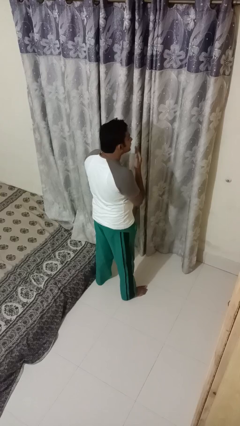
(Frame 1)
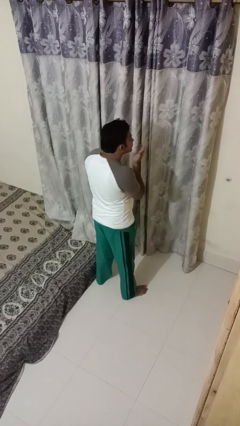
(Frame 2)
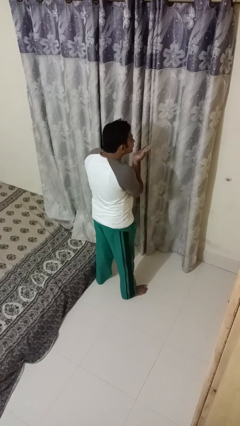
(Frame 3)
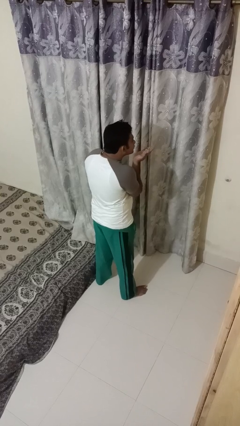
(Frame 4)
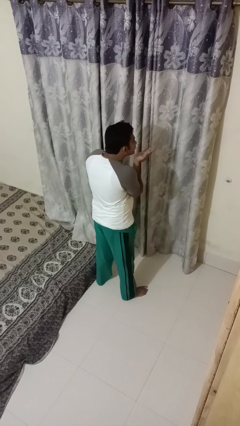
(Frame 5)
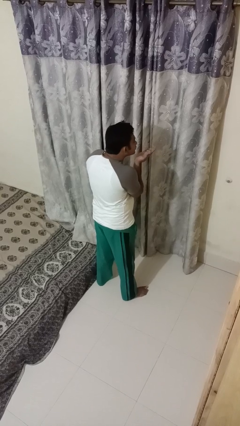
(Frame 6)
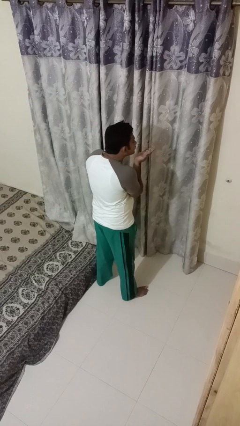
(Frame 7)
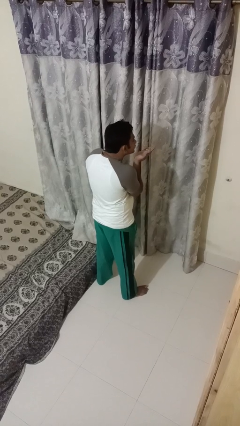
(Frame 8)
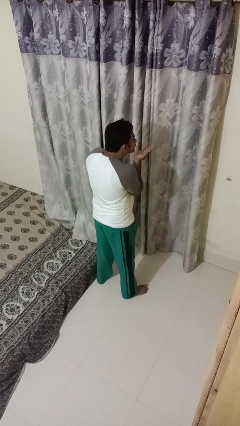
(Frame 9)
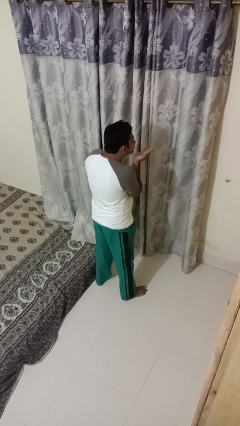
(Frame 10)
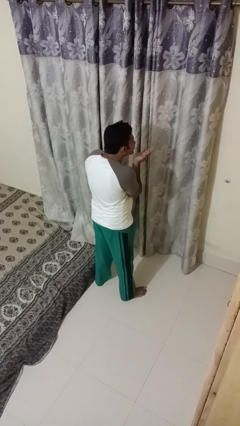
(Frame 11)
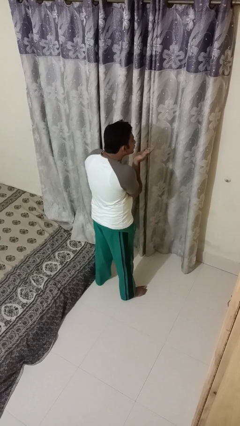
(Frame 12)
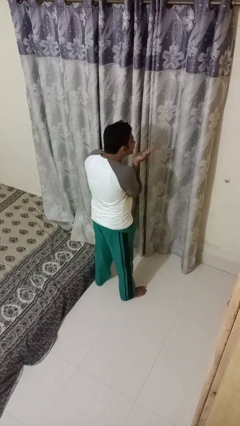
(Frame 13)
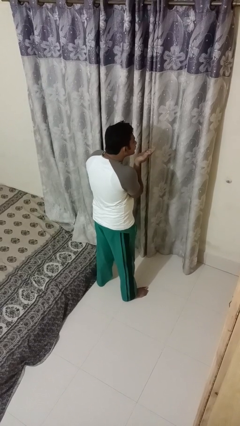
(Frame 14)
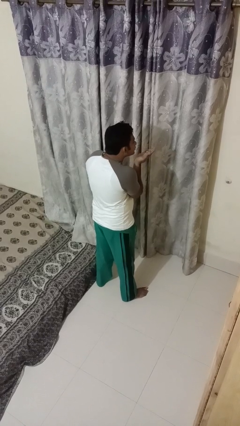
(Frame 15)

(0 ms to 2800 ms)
person gestures blow kiss

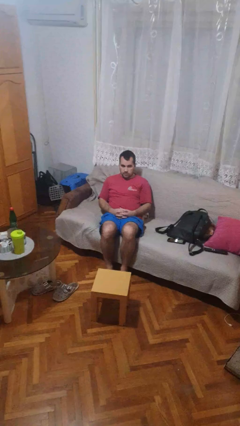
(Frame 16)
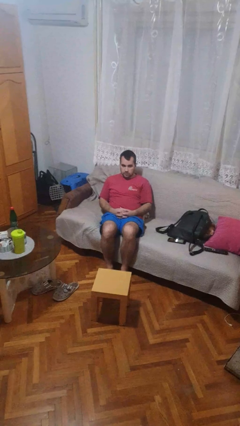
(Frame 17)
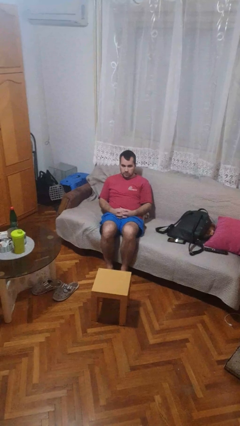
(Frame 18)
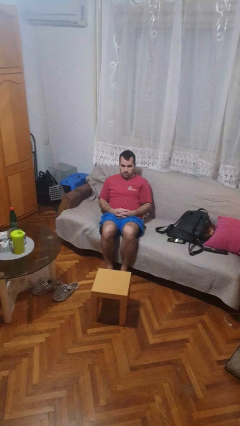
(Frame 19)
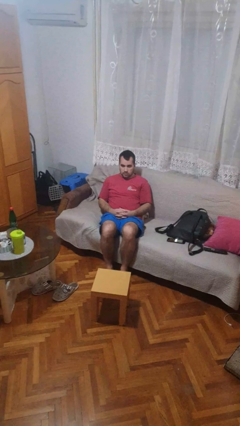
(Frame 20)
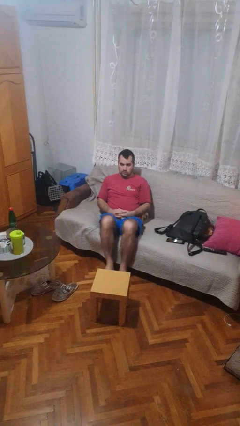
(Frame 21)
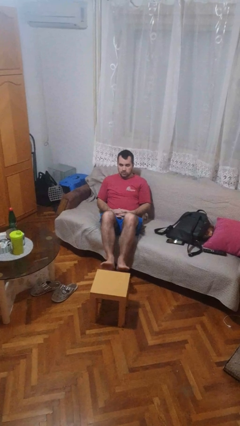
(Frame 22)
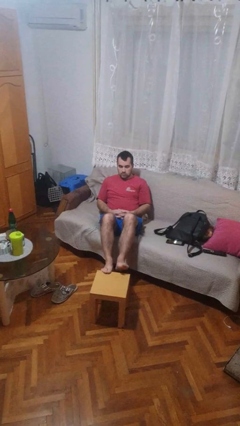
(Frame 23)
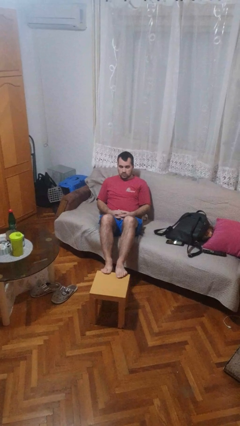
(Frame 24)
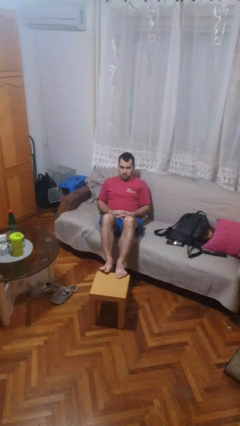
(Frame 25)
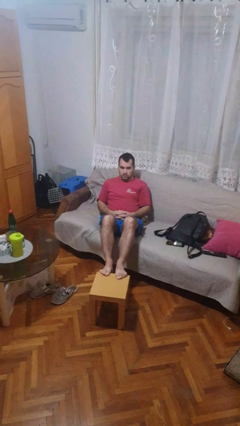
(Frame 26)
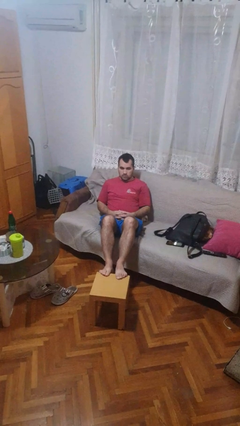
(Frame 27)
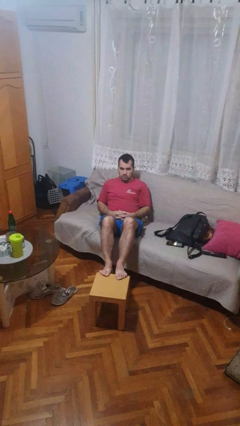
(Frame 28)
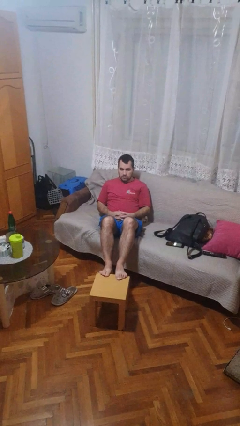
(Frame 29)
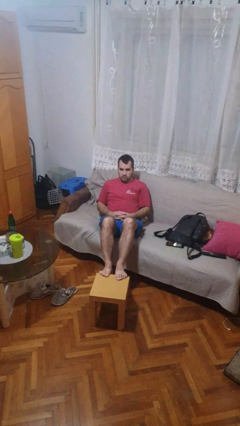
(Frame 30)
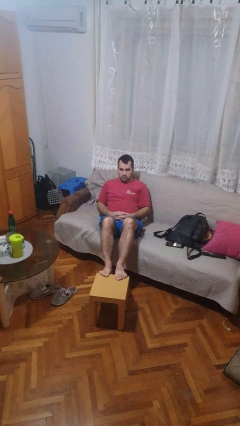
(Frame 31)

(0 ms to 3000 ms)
person puts feet up

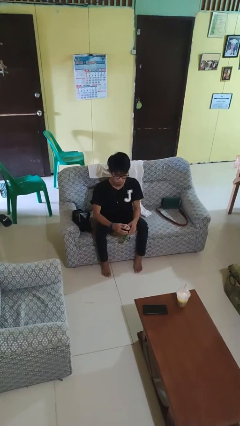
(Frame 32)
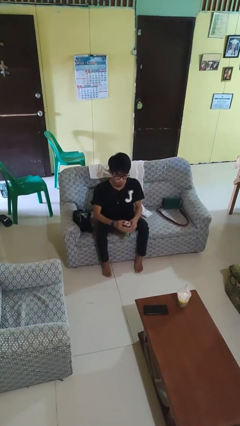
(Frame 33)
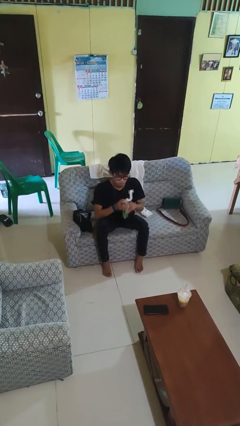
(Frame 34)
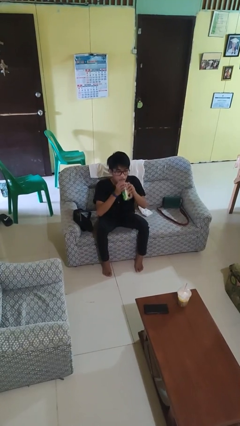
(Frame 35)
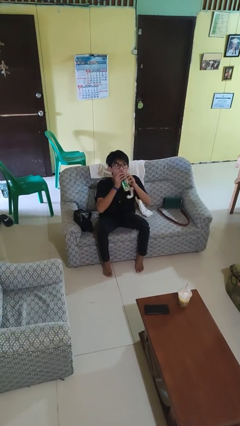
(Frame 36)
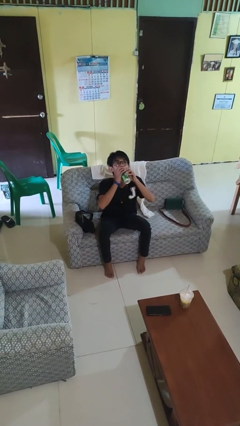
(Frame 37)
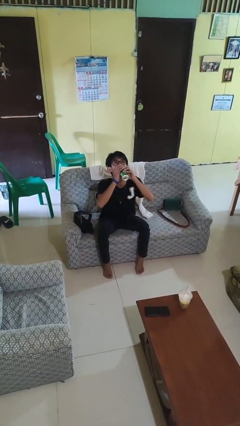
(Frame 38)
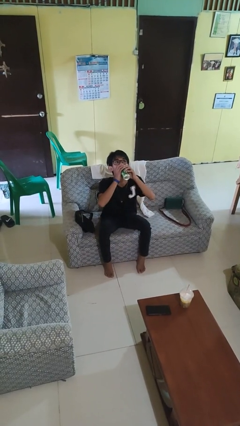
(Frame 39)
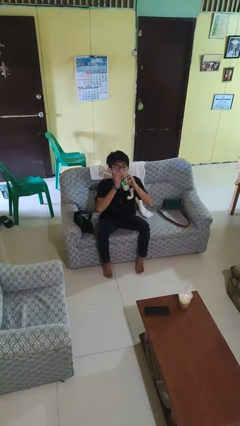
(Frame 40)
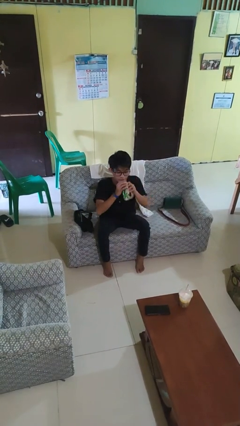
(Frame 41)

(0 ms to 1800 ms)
person drinks from beverage can

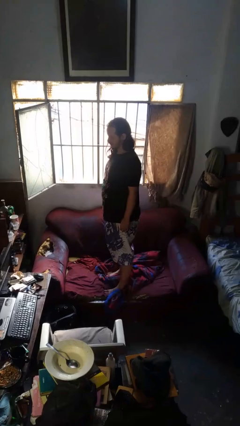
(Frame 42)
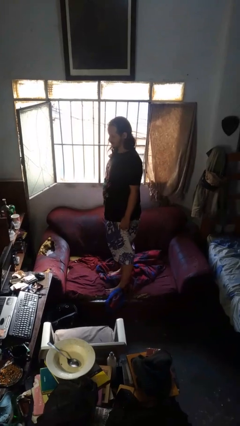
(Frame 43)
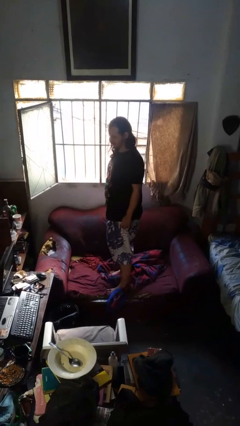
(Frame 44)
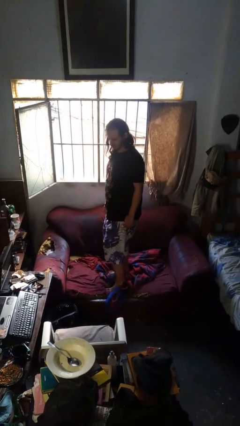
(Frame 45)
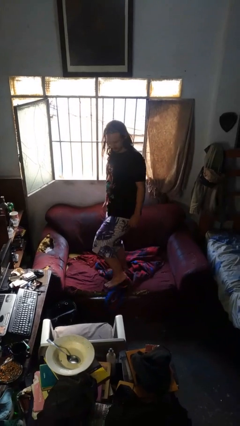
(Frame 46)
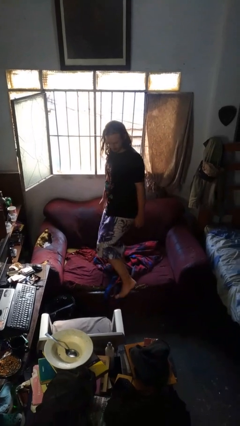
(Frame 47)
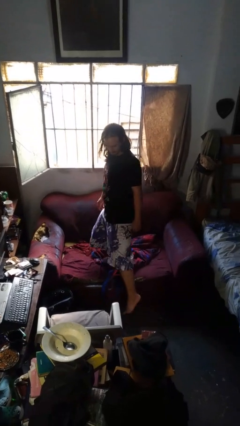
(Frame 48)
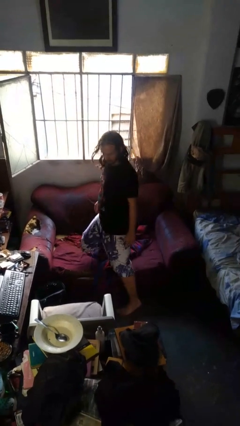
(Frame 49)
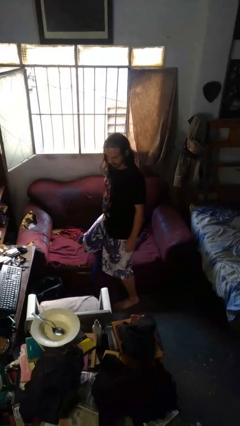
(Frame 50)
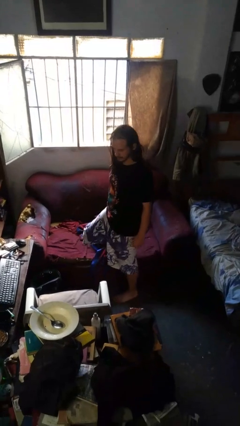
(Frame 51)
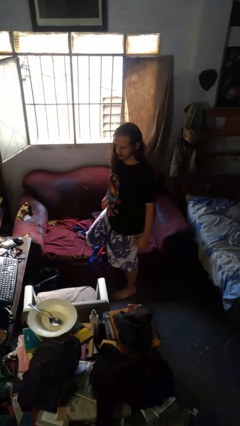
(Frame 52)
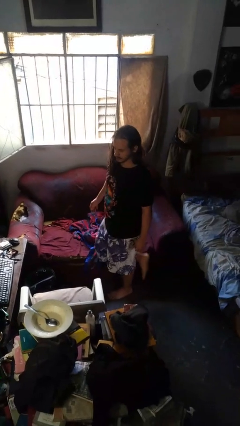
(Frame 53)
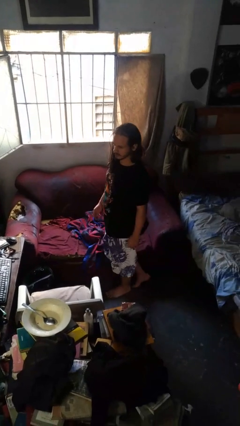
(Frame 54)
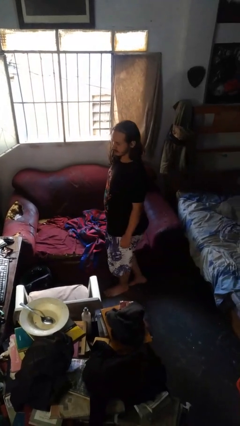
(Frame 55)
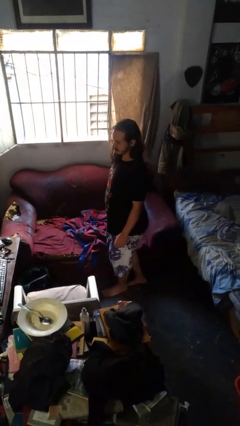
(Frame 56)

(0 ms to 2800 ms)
person climbs off couch

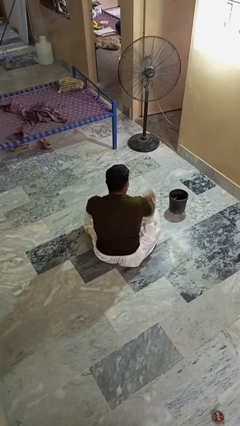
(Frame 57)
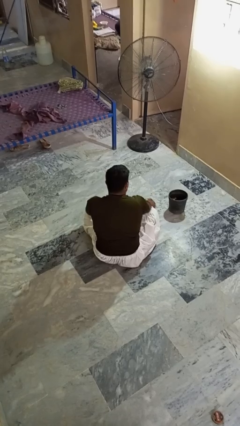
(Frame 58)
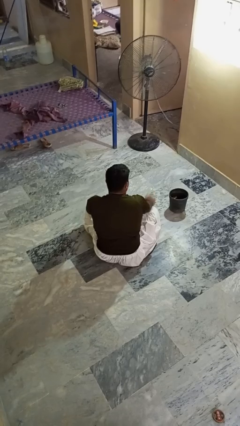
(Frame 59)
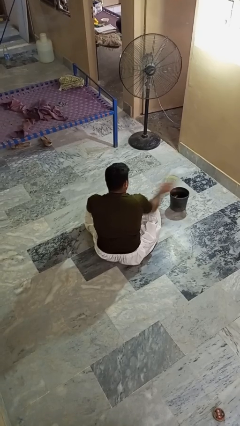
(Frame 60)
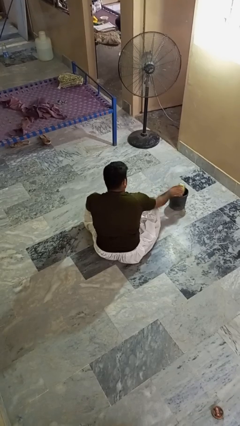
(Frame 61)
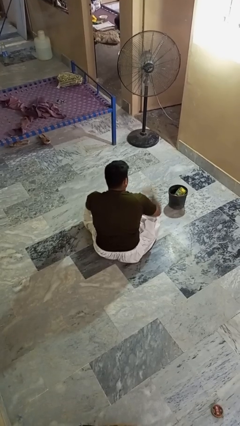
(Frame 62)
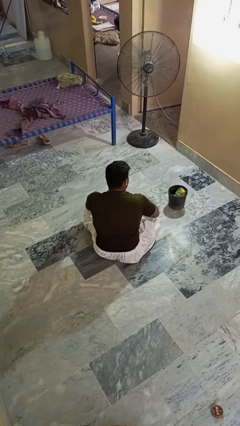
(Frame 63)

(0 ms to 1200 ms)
person puts object into basket

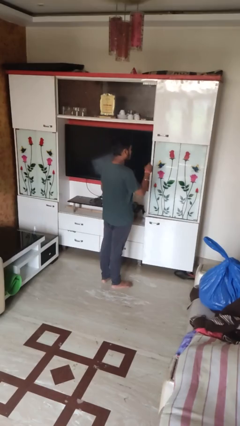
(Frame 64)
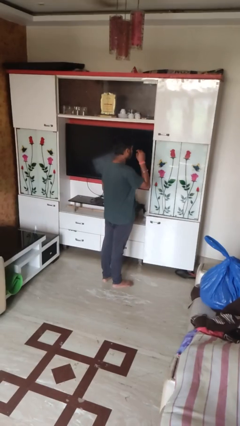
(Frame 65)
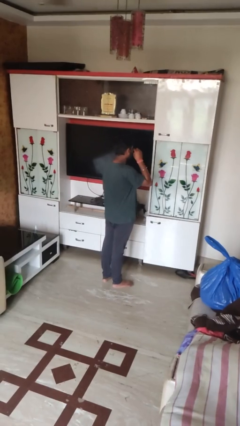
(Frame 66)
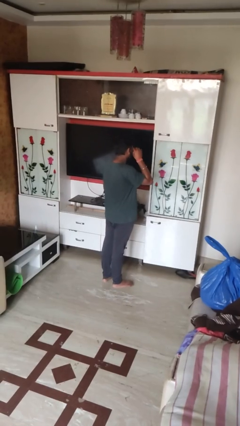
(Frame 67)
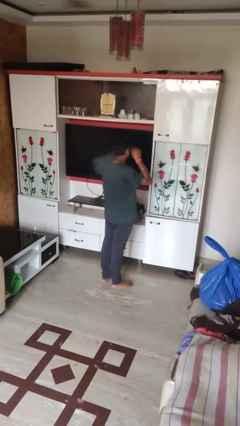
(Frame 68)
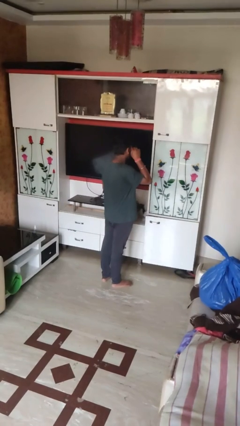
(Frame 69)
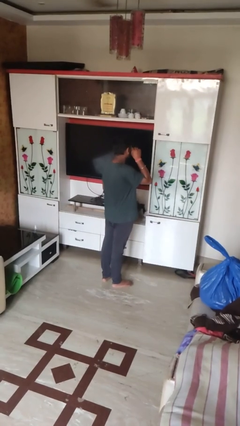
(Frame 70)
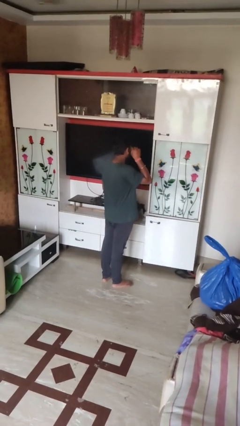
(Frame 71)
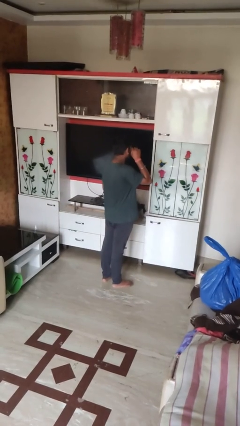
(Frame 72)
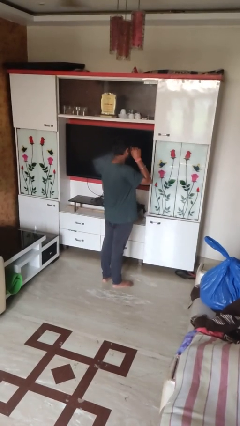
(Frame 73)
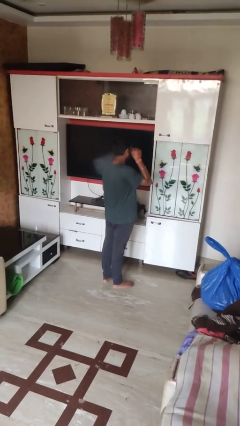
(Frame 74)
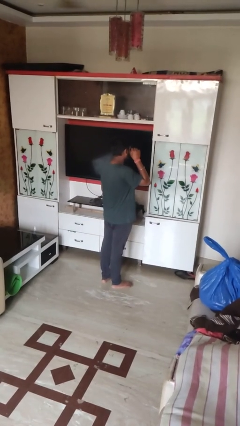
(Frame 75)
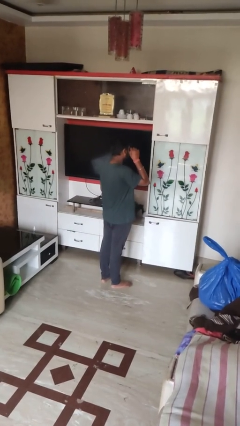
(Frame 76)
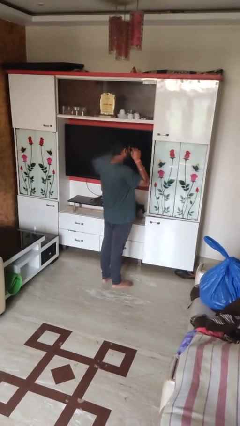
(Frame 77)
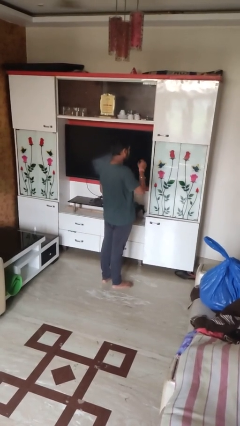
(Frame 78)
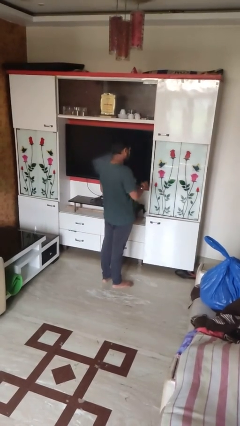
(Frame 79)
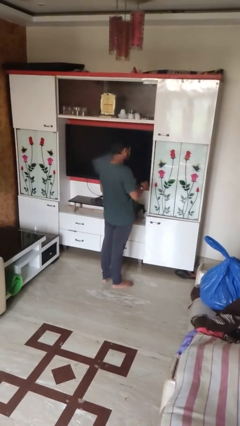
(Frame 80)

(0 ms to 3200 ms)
person applies eye makeup

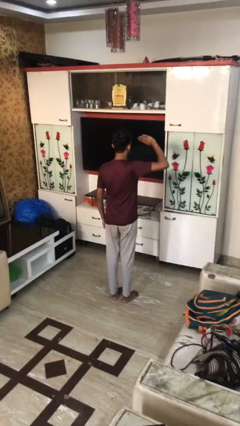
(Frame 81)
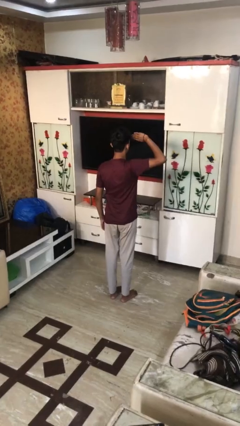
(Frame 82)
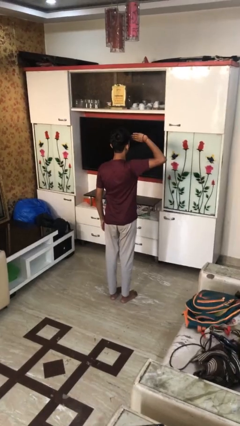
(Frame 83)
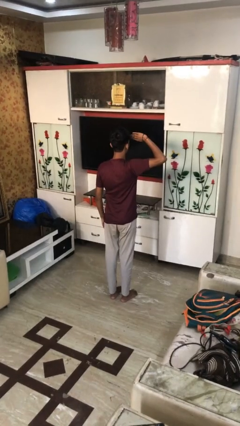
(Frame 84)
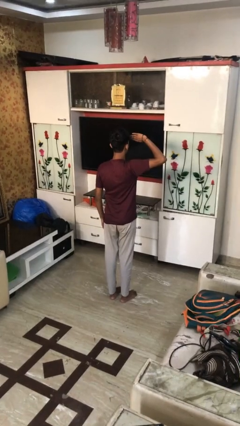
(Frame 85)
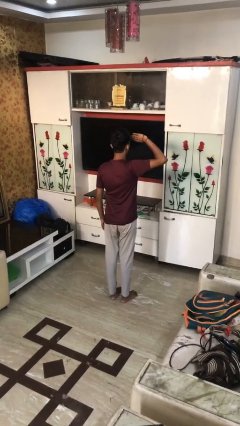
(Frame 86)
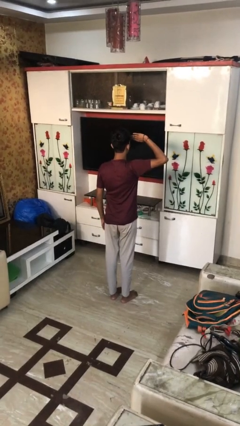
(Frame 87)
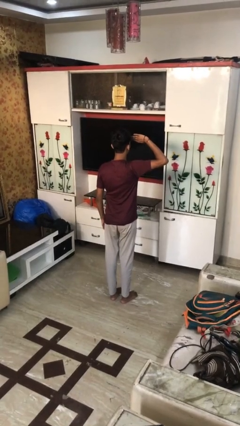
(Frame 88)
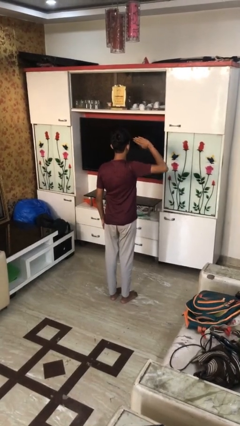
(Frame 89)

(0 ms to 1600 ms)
person salutes

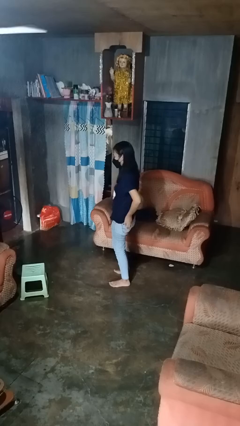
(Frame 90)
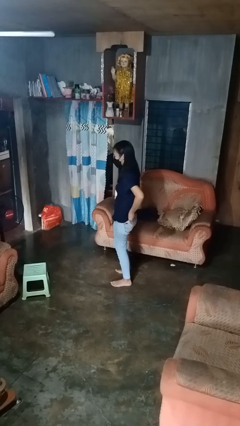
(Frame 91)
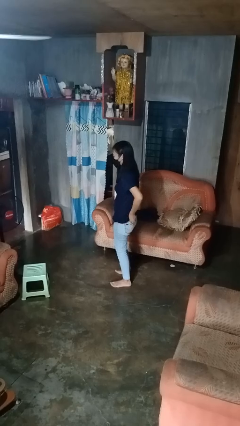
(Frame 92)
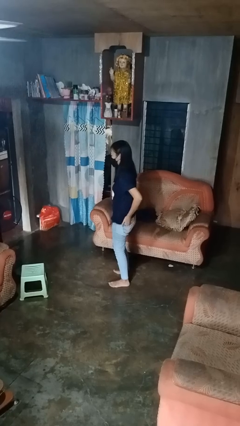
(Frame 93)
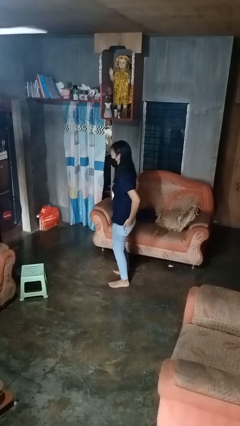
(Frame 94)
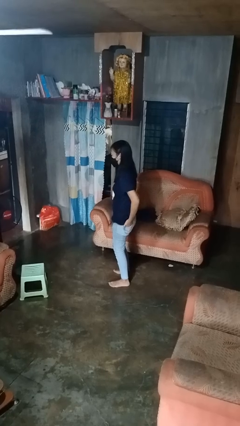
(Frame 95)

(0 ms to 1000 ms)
person puts hands in back pockets
